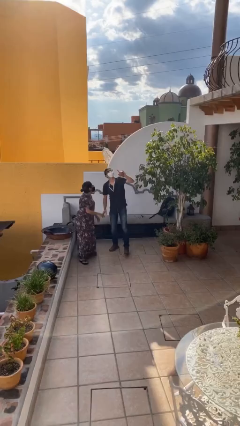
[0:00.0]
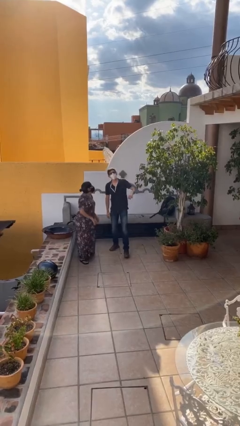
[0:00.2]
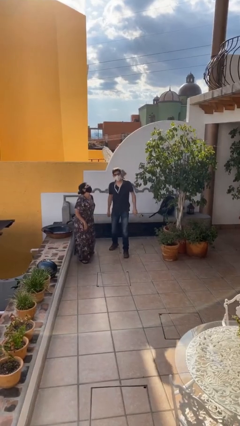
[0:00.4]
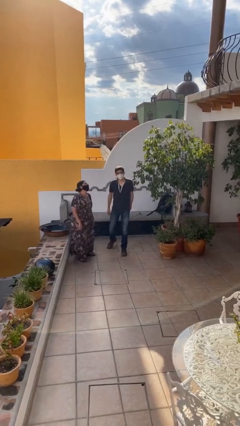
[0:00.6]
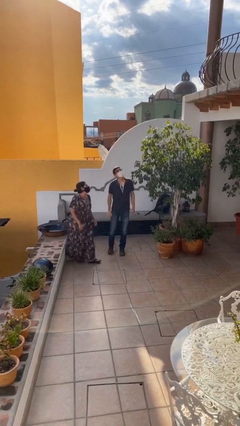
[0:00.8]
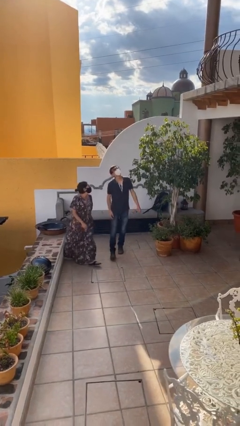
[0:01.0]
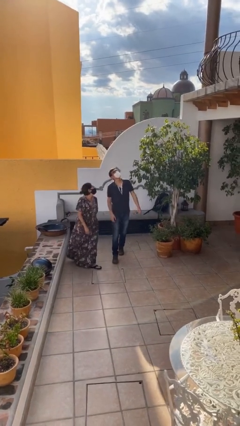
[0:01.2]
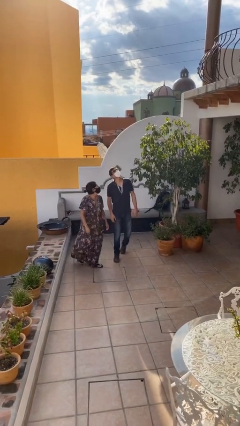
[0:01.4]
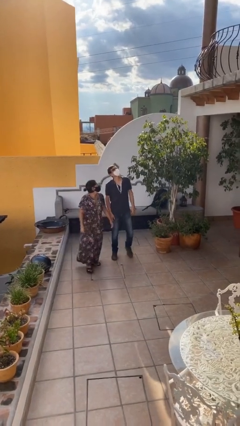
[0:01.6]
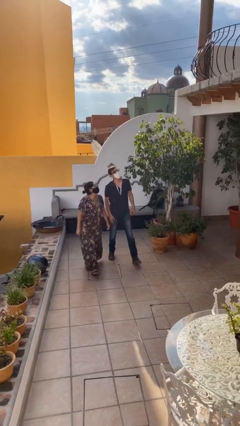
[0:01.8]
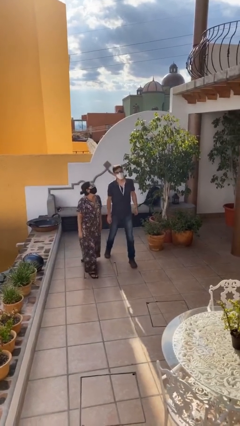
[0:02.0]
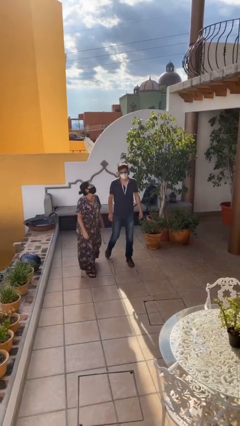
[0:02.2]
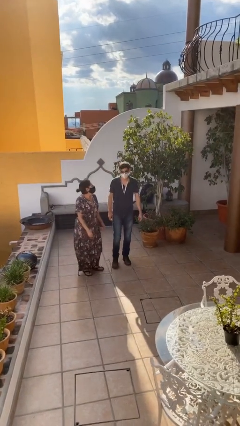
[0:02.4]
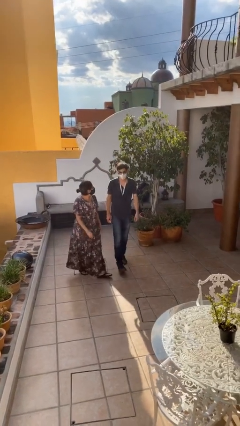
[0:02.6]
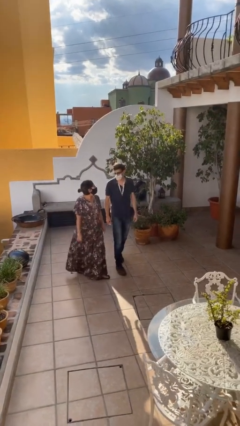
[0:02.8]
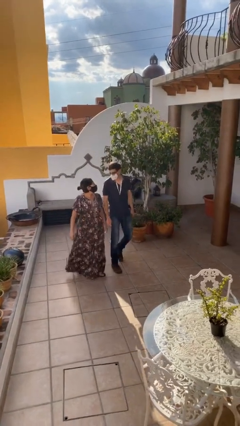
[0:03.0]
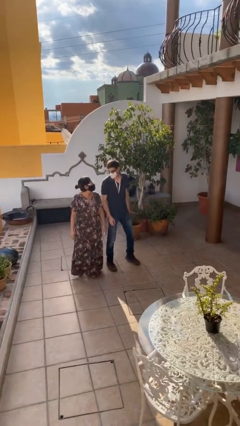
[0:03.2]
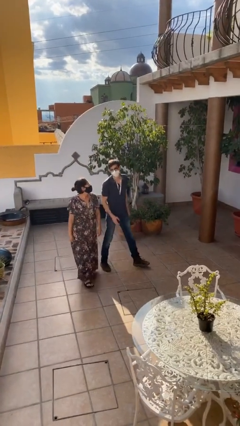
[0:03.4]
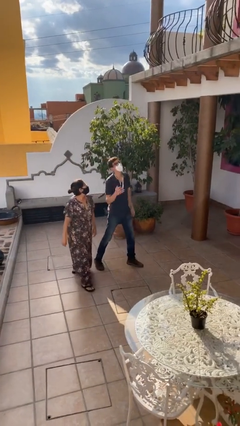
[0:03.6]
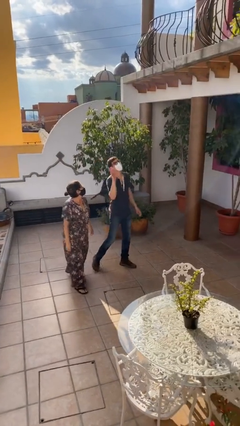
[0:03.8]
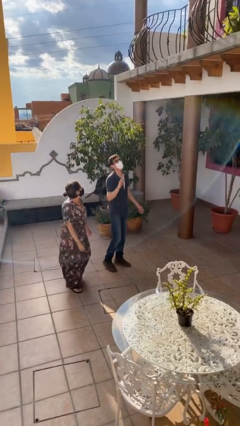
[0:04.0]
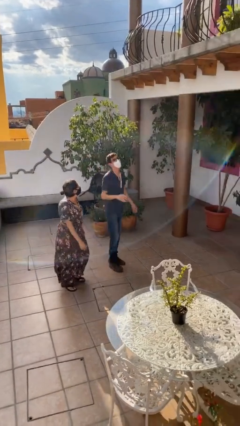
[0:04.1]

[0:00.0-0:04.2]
person talks to person

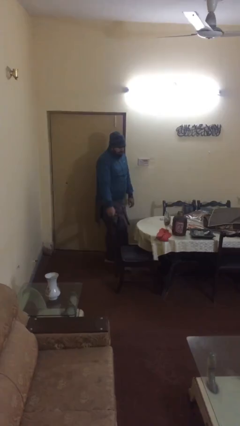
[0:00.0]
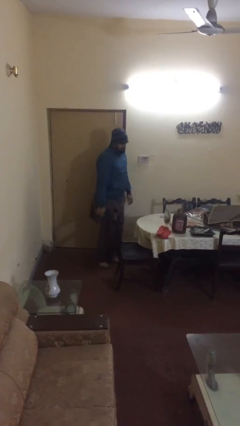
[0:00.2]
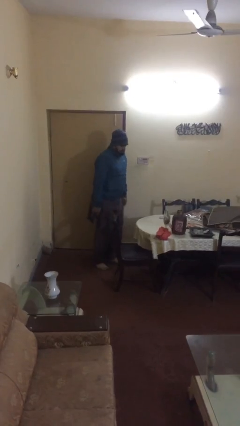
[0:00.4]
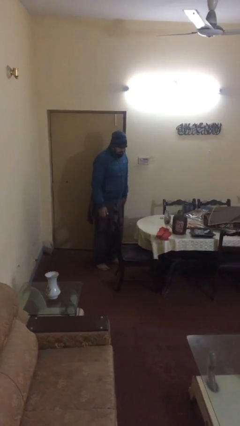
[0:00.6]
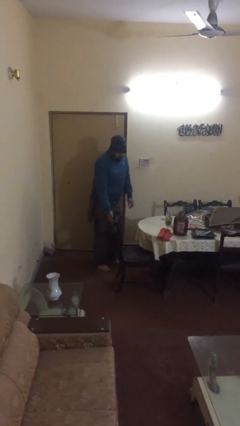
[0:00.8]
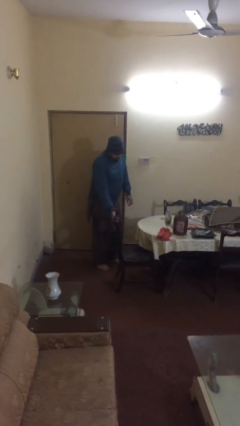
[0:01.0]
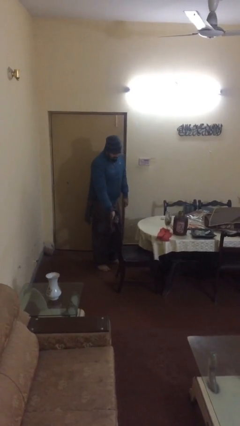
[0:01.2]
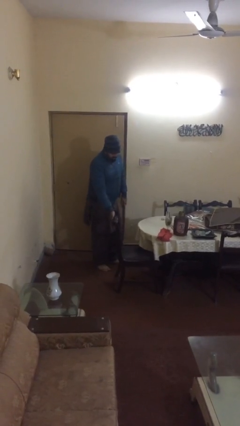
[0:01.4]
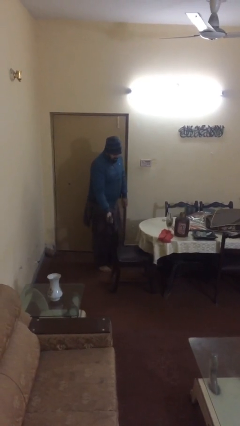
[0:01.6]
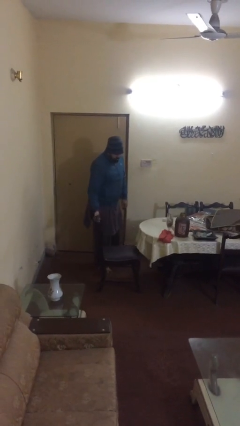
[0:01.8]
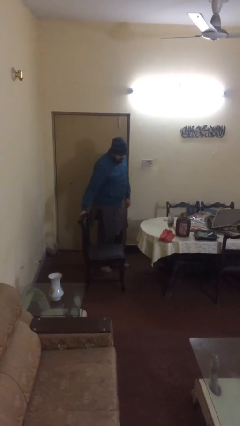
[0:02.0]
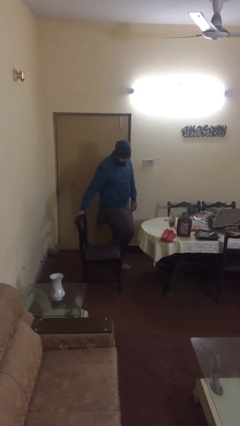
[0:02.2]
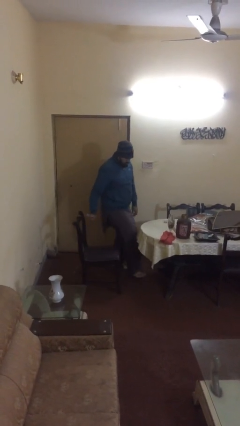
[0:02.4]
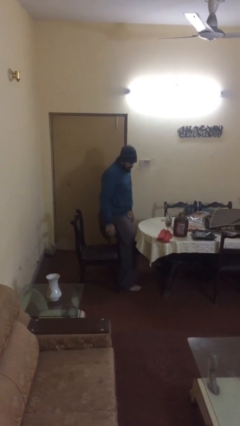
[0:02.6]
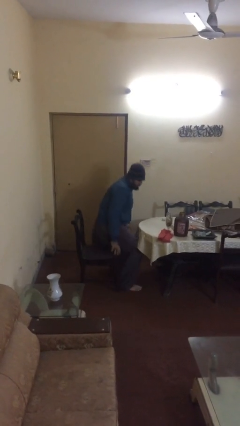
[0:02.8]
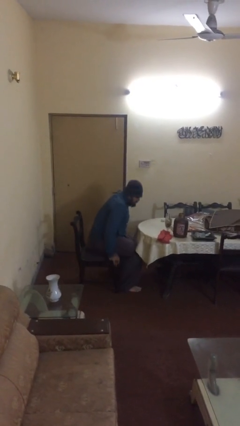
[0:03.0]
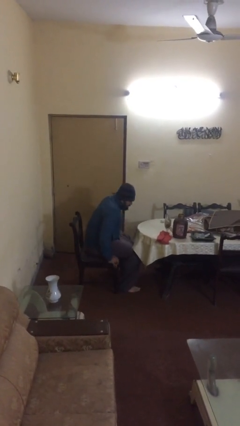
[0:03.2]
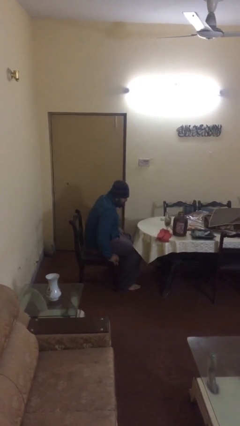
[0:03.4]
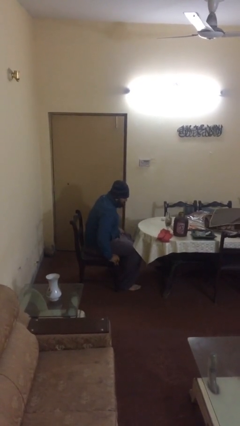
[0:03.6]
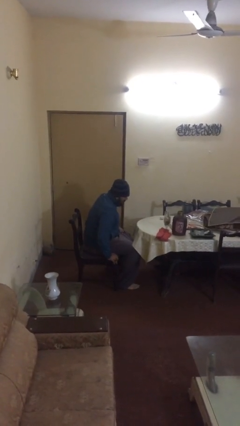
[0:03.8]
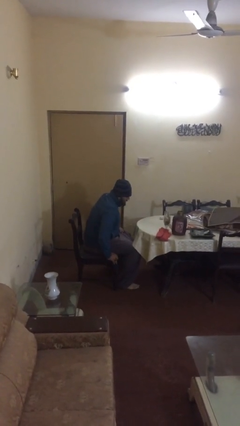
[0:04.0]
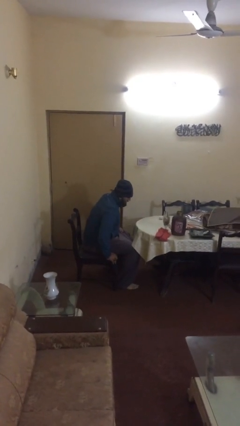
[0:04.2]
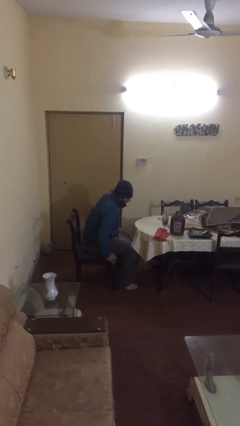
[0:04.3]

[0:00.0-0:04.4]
person sits down

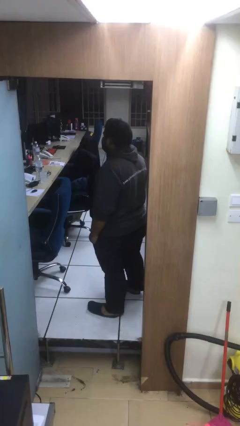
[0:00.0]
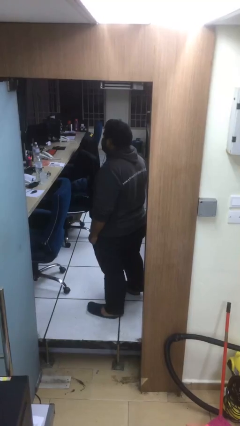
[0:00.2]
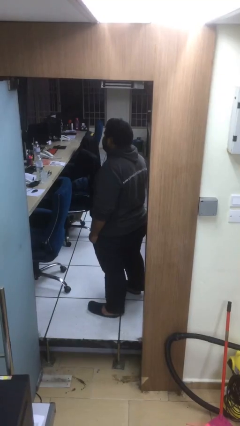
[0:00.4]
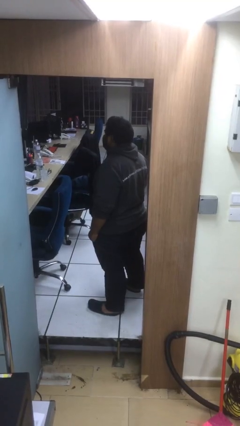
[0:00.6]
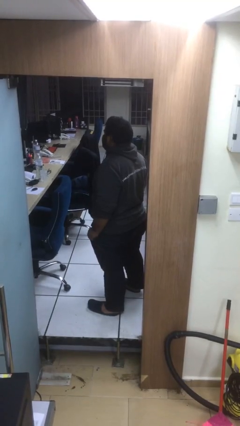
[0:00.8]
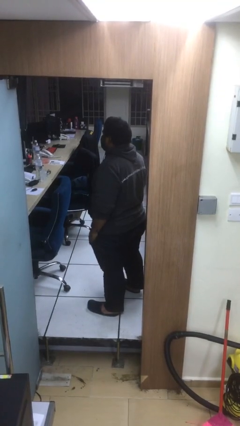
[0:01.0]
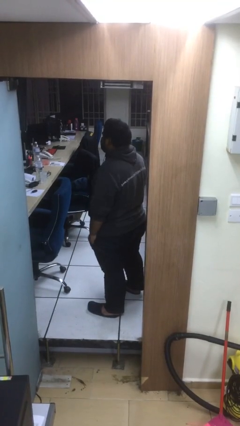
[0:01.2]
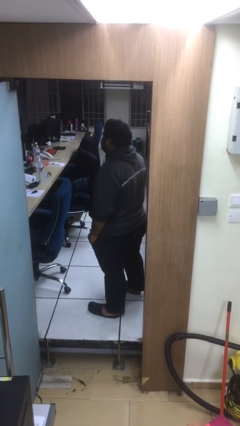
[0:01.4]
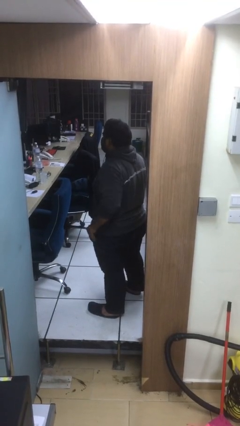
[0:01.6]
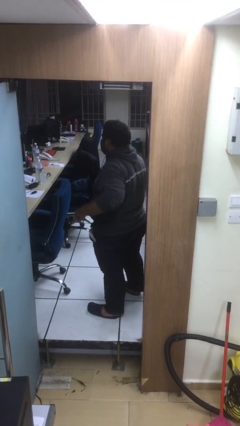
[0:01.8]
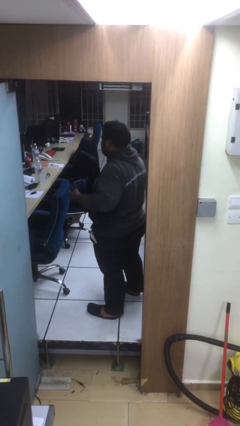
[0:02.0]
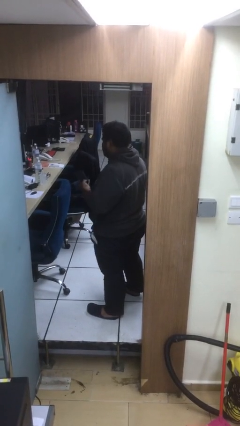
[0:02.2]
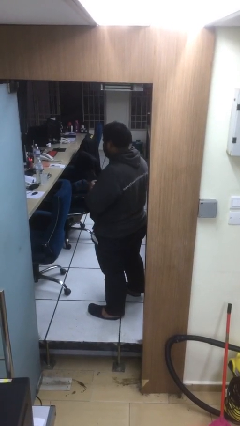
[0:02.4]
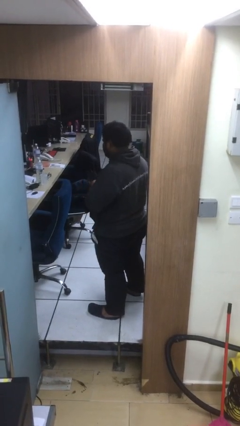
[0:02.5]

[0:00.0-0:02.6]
person takes phone from pocket

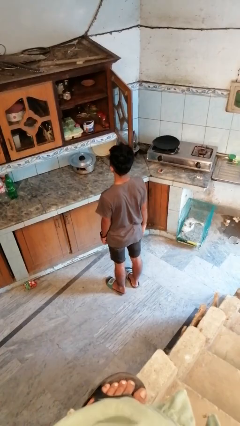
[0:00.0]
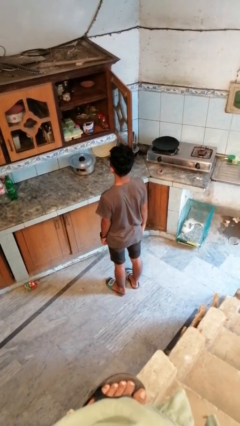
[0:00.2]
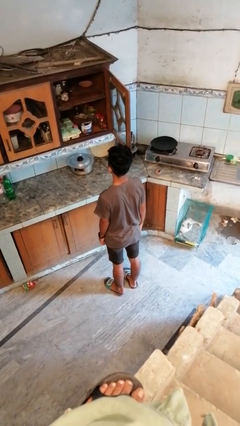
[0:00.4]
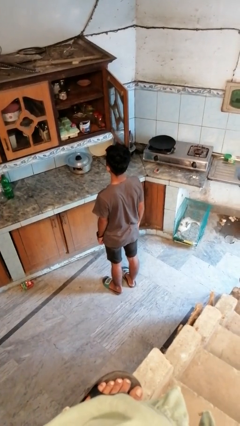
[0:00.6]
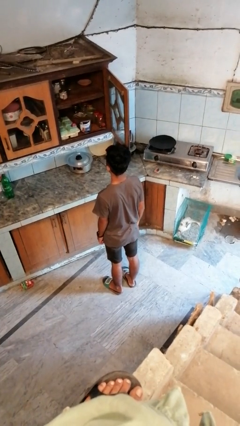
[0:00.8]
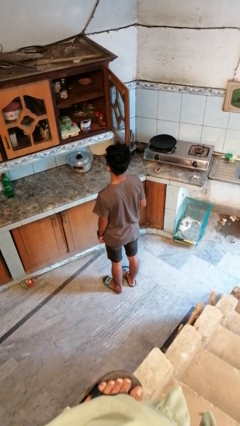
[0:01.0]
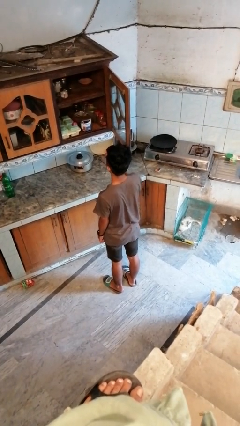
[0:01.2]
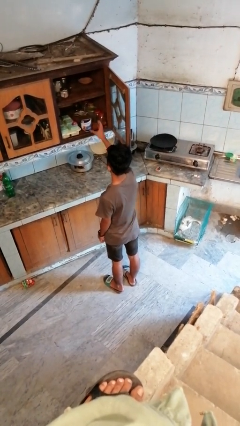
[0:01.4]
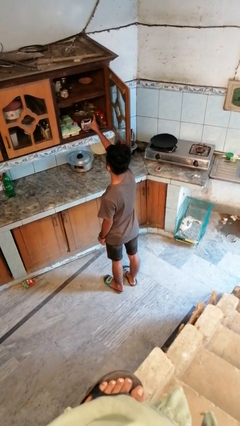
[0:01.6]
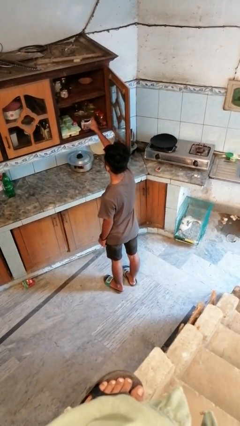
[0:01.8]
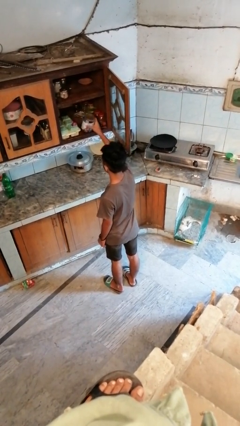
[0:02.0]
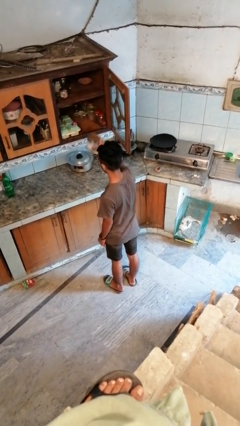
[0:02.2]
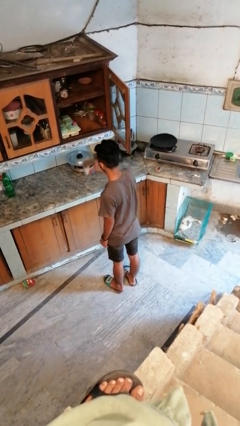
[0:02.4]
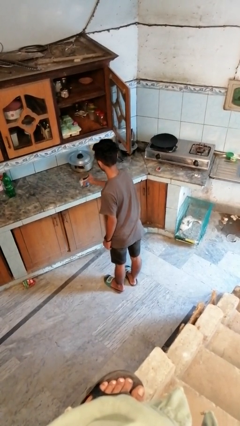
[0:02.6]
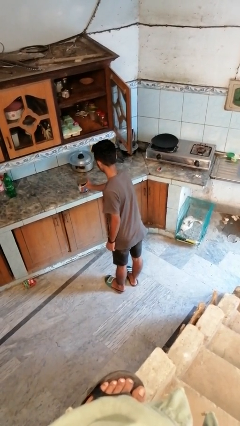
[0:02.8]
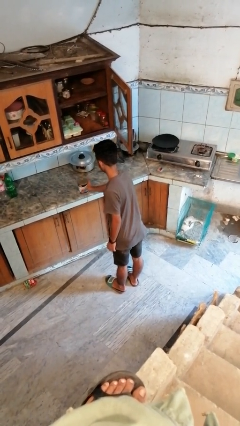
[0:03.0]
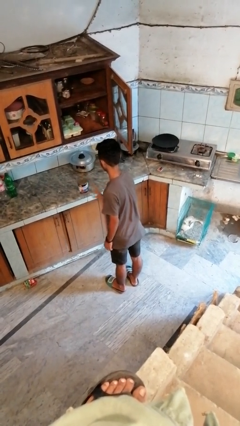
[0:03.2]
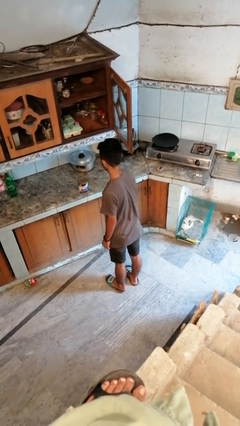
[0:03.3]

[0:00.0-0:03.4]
person takes object from cabinet

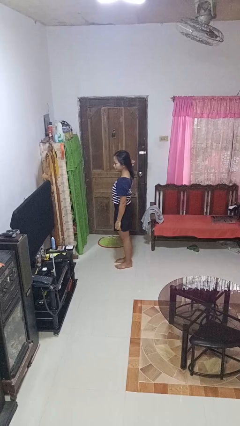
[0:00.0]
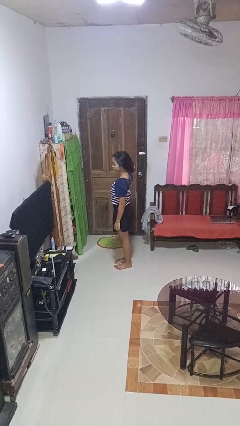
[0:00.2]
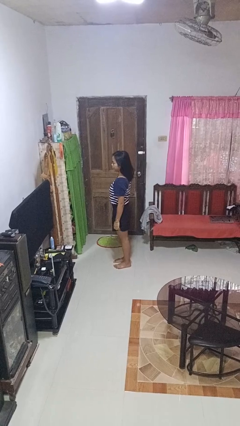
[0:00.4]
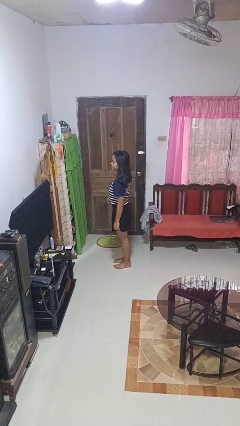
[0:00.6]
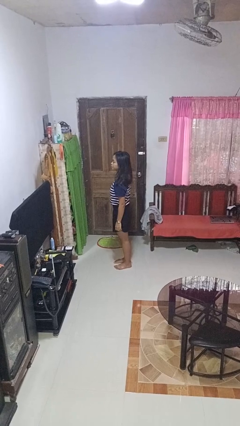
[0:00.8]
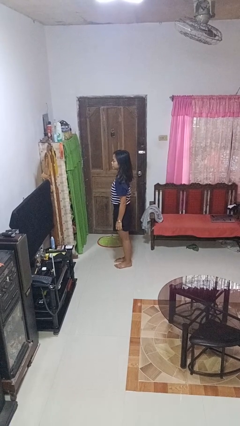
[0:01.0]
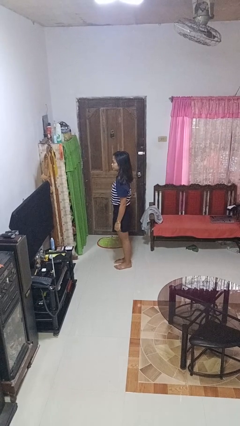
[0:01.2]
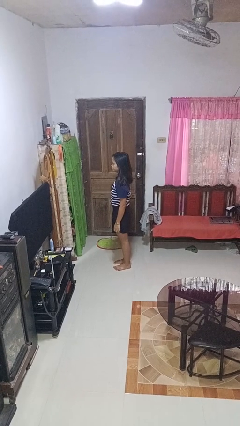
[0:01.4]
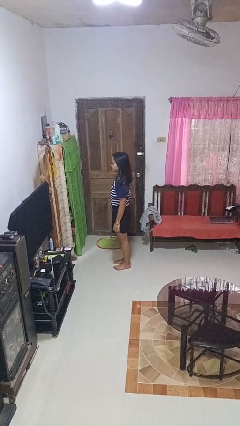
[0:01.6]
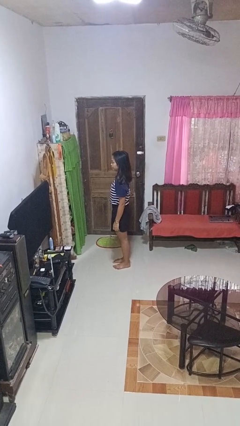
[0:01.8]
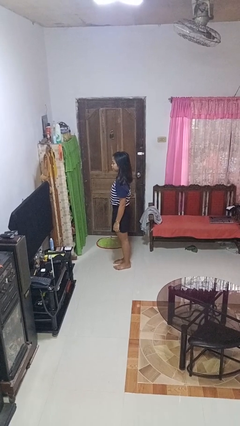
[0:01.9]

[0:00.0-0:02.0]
person takes off hairtie

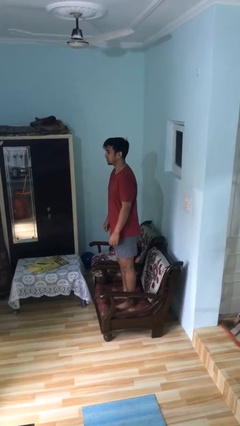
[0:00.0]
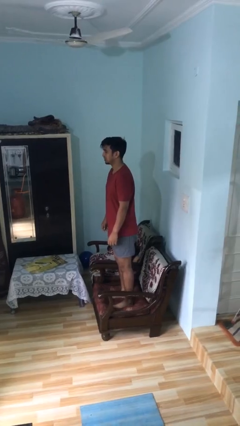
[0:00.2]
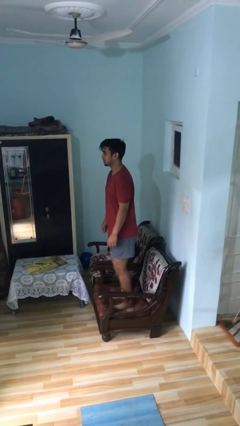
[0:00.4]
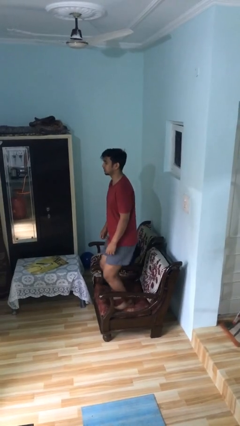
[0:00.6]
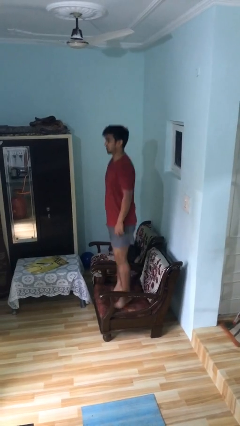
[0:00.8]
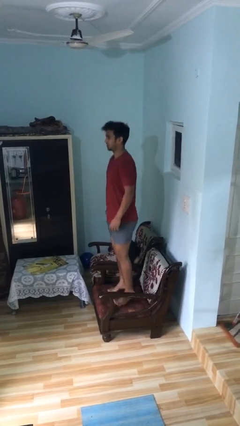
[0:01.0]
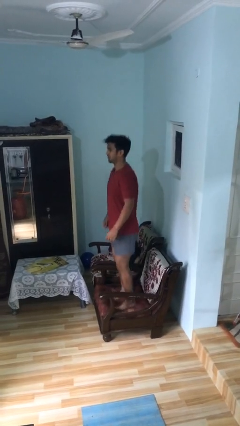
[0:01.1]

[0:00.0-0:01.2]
person jumps on couch
